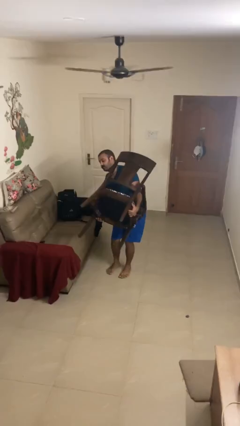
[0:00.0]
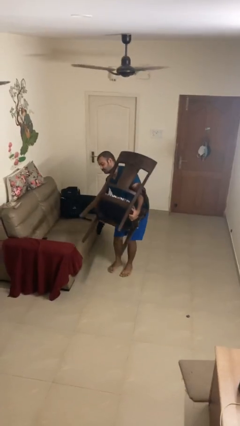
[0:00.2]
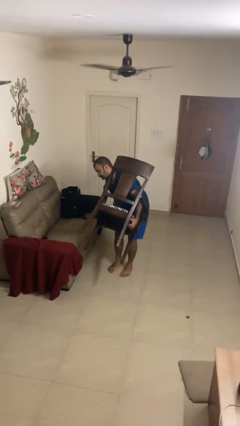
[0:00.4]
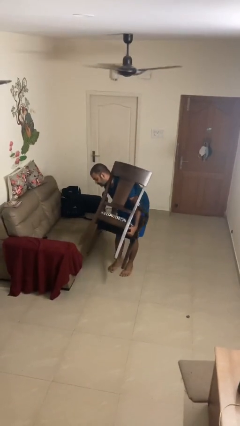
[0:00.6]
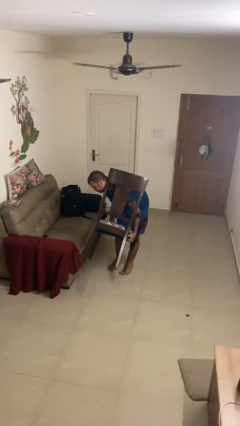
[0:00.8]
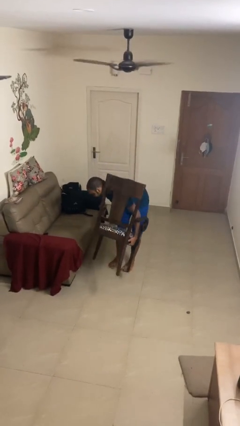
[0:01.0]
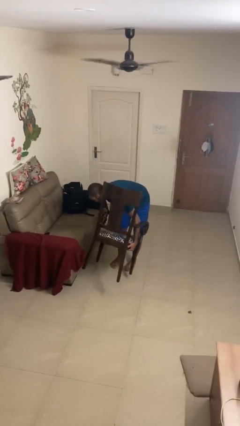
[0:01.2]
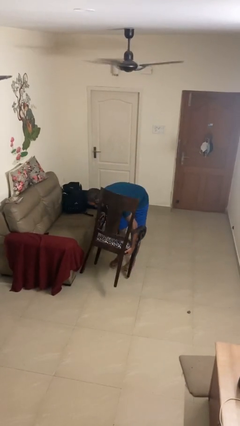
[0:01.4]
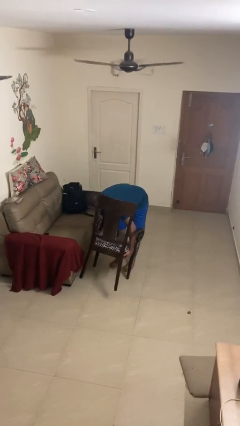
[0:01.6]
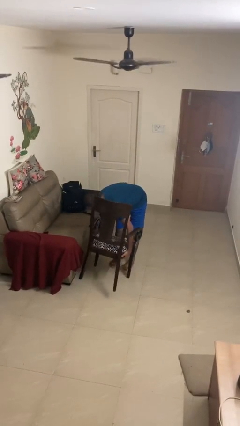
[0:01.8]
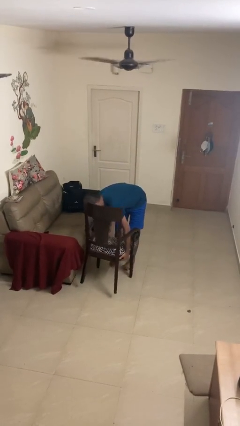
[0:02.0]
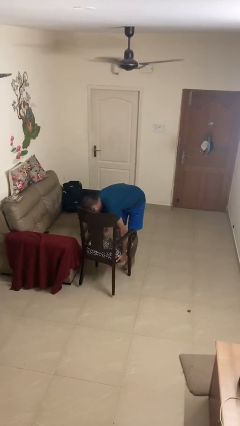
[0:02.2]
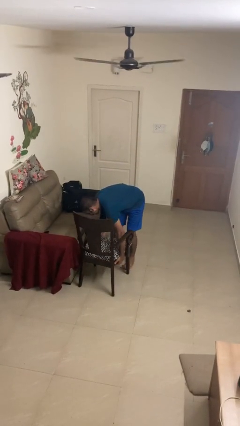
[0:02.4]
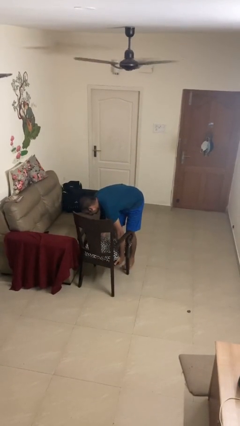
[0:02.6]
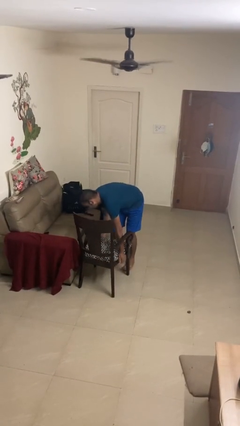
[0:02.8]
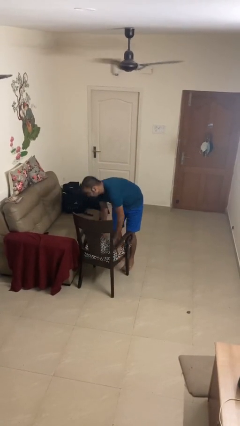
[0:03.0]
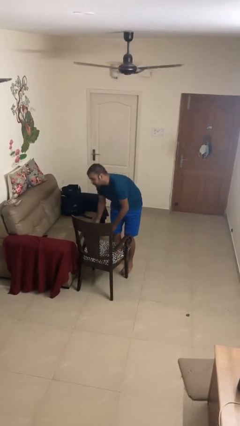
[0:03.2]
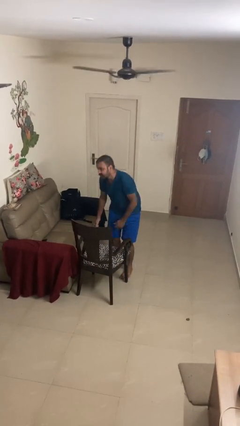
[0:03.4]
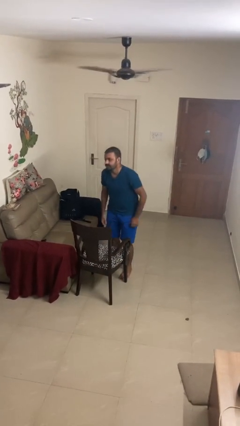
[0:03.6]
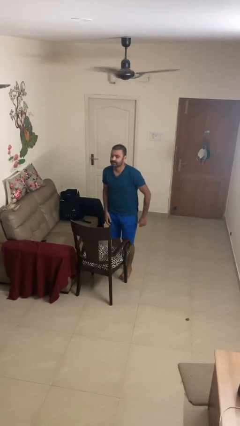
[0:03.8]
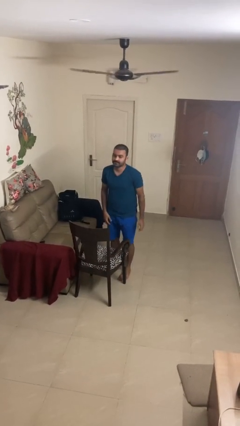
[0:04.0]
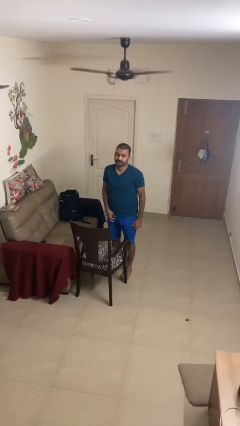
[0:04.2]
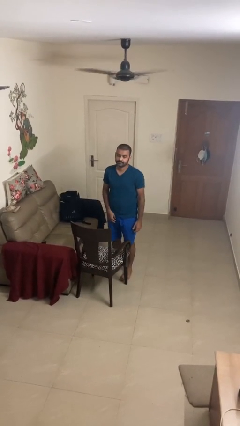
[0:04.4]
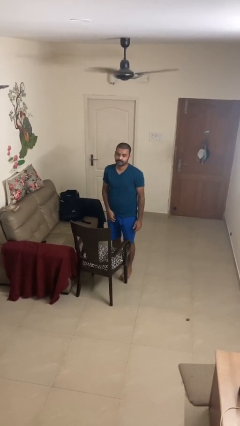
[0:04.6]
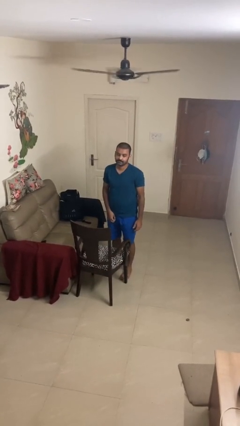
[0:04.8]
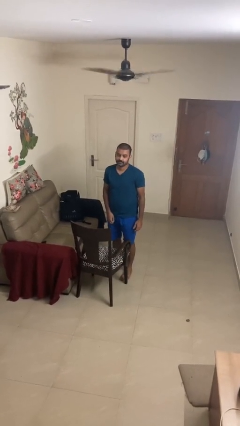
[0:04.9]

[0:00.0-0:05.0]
person puts down object on floor

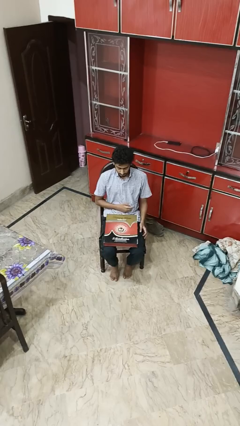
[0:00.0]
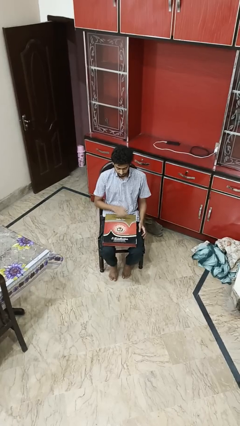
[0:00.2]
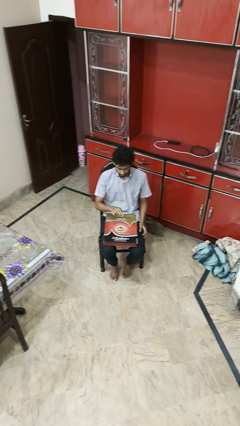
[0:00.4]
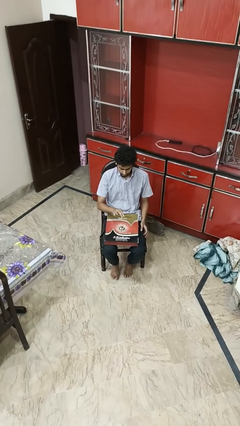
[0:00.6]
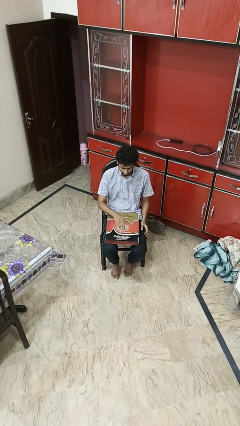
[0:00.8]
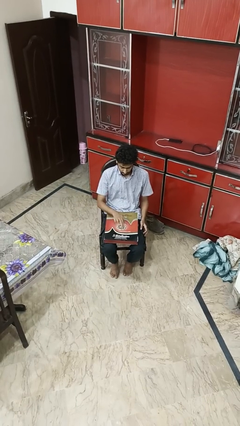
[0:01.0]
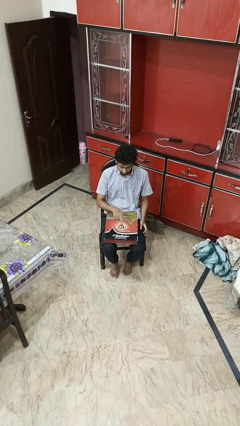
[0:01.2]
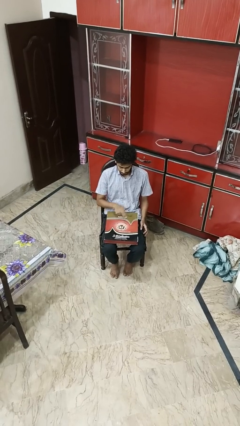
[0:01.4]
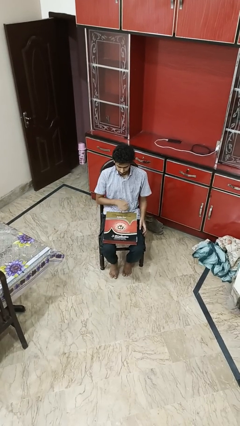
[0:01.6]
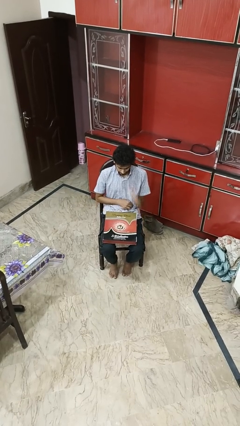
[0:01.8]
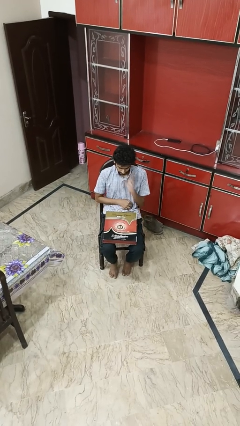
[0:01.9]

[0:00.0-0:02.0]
person taps object with finger

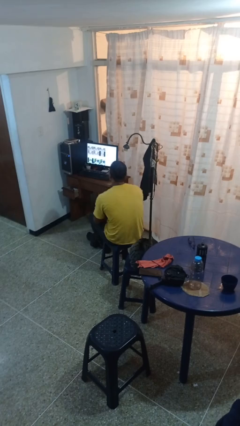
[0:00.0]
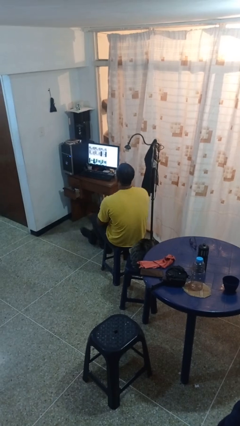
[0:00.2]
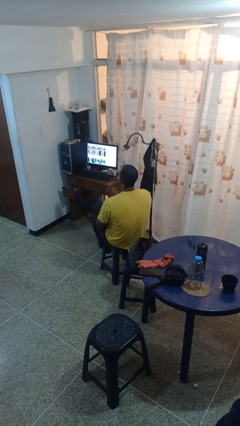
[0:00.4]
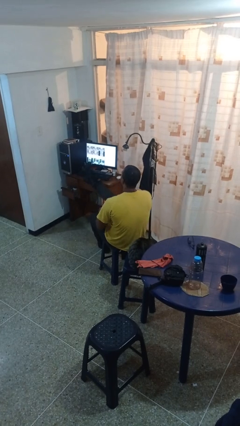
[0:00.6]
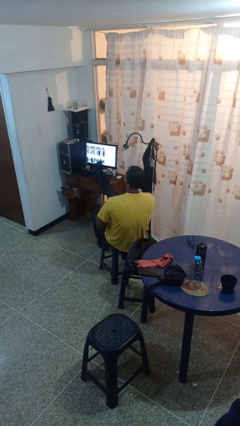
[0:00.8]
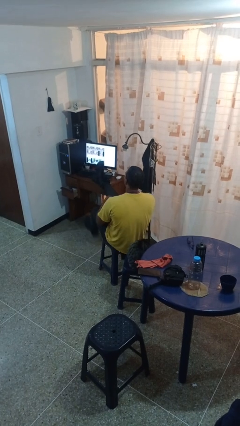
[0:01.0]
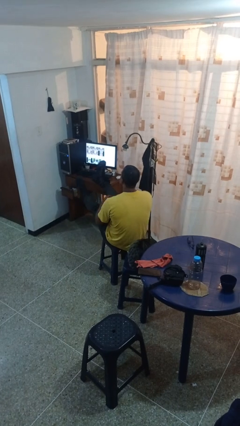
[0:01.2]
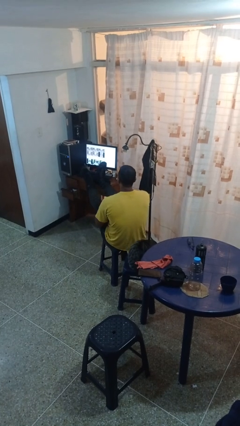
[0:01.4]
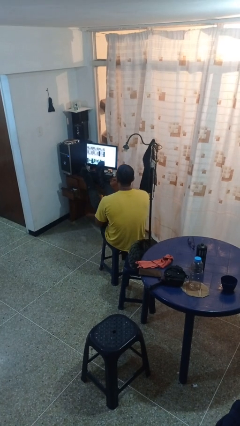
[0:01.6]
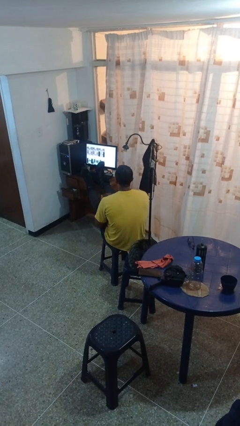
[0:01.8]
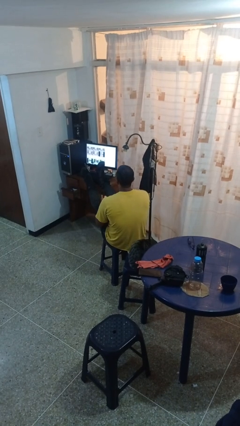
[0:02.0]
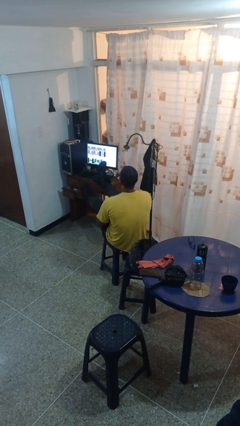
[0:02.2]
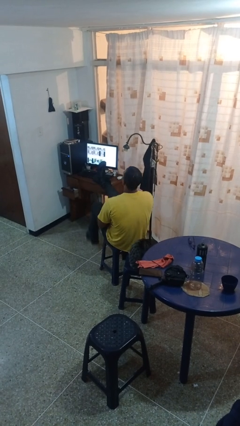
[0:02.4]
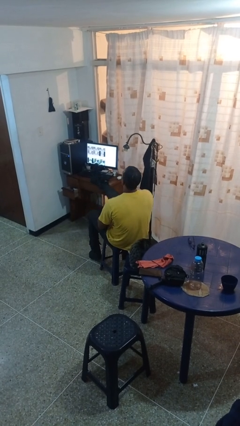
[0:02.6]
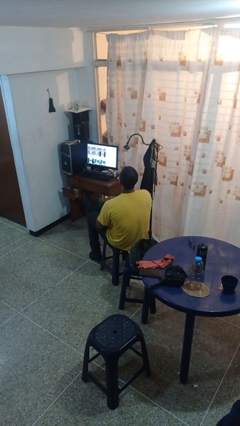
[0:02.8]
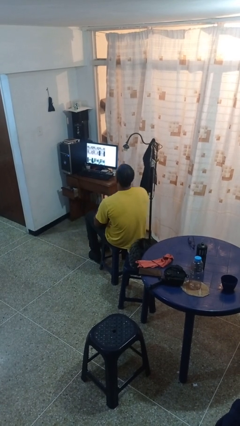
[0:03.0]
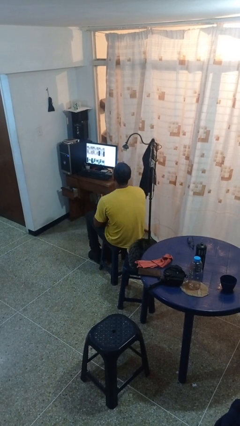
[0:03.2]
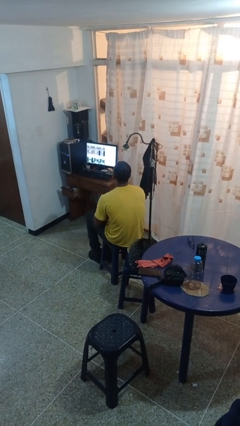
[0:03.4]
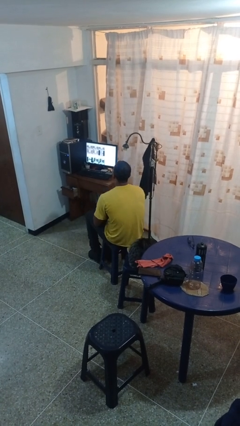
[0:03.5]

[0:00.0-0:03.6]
person puts feet up

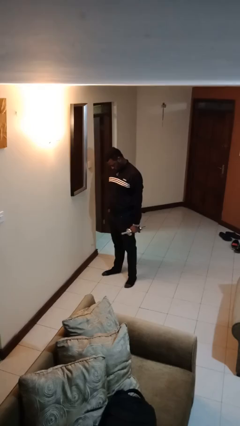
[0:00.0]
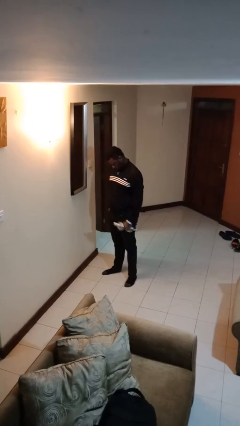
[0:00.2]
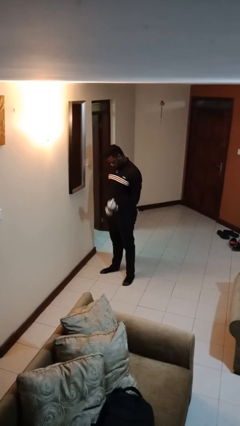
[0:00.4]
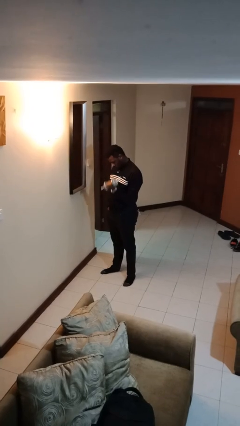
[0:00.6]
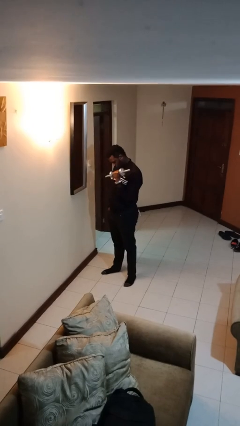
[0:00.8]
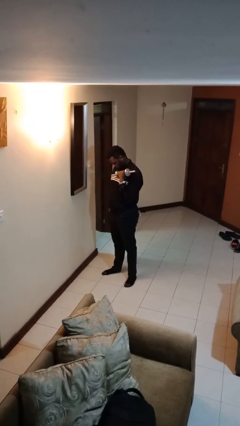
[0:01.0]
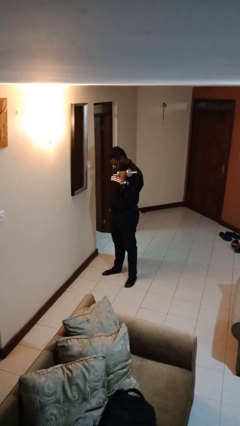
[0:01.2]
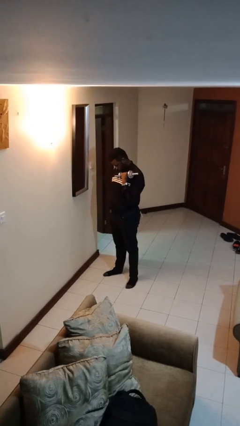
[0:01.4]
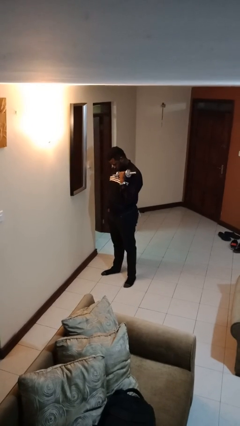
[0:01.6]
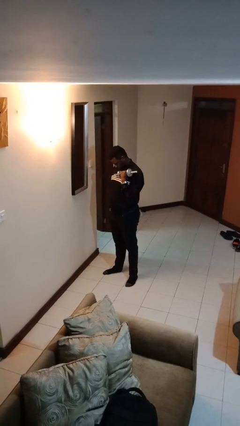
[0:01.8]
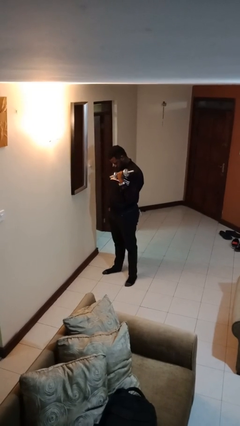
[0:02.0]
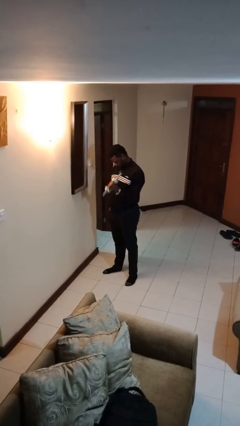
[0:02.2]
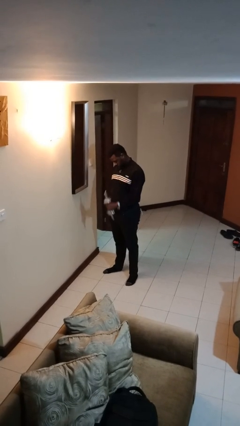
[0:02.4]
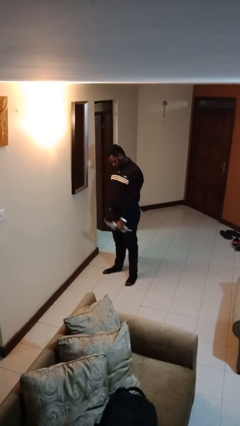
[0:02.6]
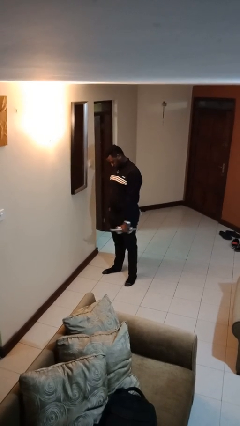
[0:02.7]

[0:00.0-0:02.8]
person lifts dumbbells

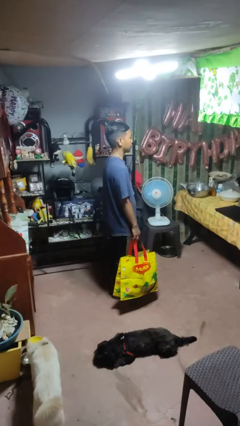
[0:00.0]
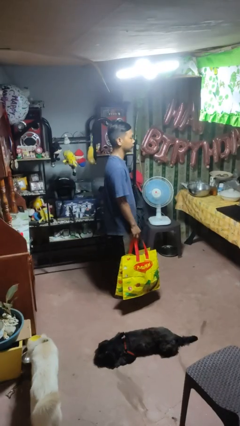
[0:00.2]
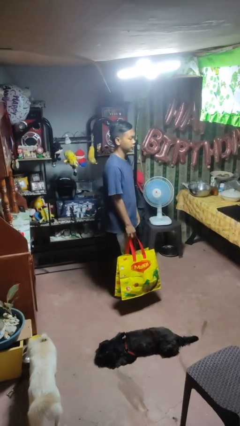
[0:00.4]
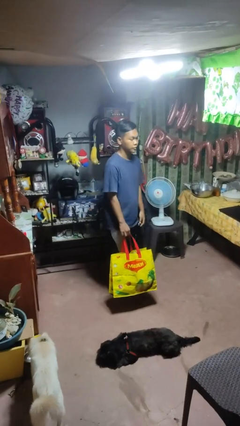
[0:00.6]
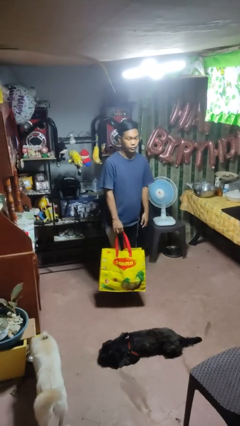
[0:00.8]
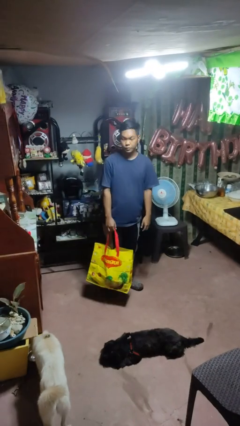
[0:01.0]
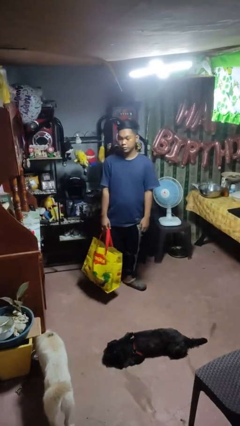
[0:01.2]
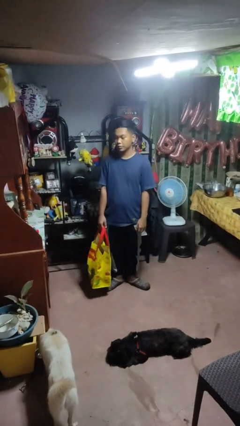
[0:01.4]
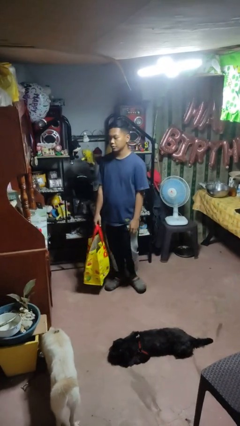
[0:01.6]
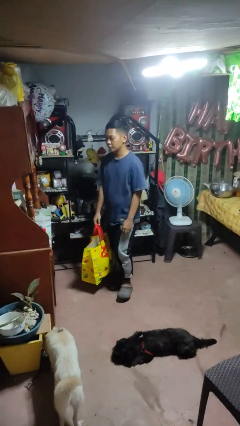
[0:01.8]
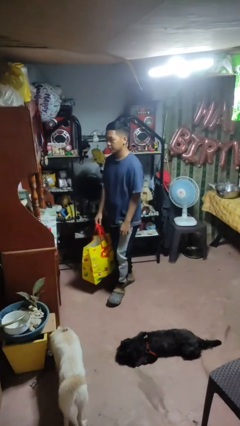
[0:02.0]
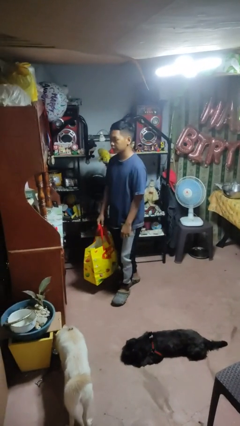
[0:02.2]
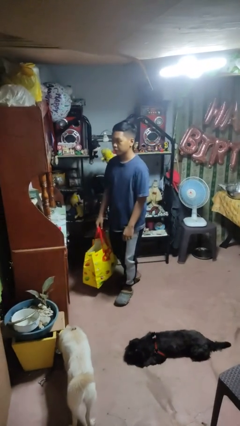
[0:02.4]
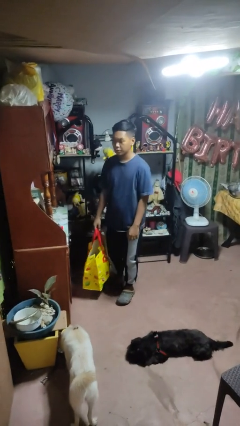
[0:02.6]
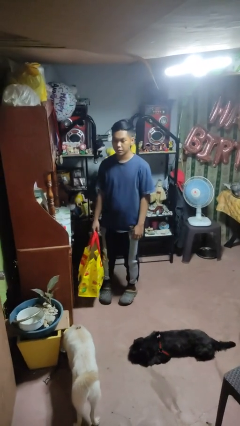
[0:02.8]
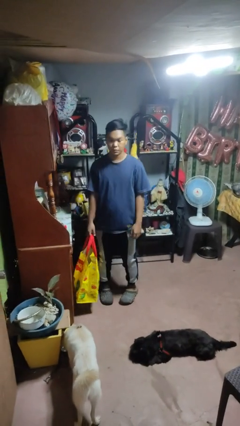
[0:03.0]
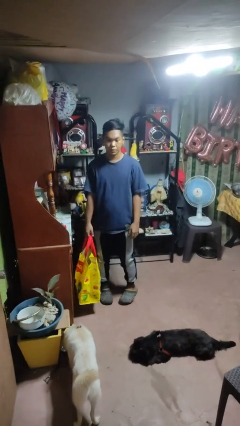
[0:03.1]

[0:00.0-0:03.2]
person carries groceries

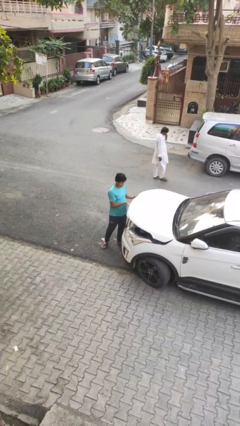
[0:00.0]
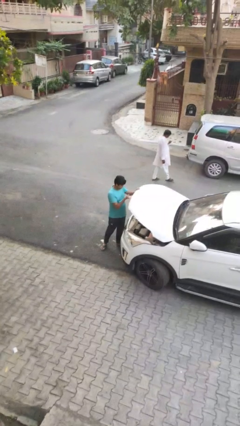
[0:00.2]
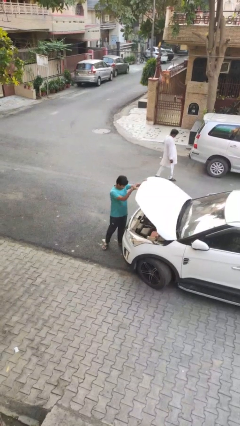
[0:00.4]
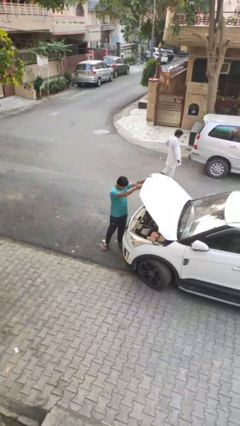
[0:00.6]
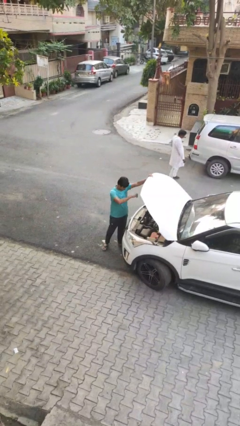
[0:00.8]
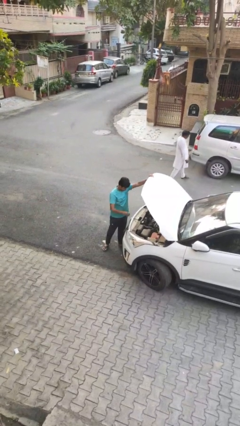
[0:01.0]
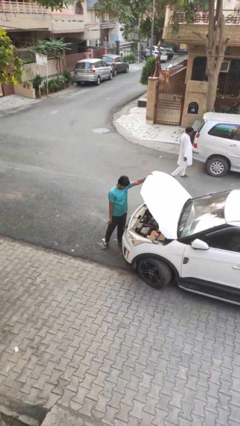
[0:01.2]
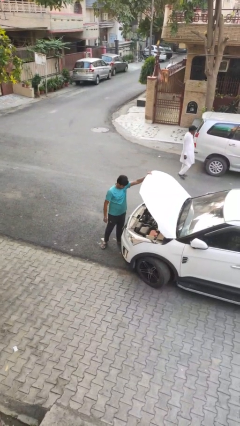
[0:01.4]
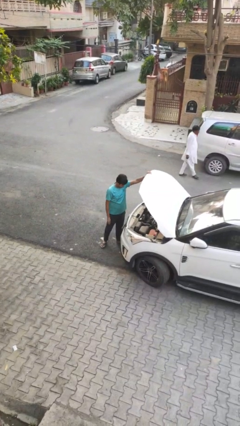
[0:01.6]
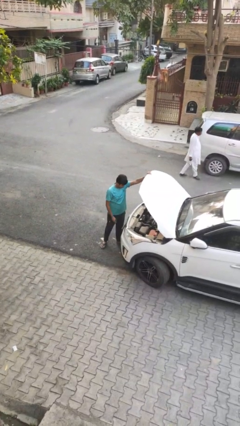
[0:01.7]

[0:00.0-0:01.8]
person opens car hood
